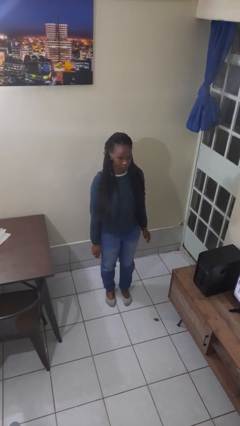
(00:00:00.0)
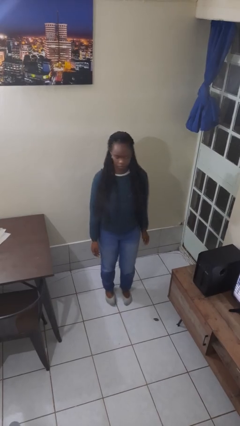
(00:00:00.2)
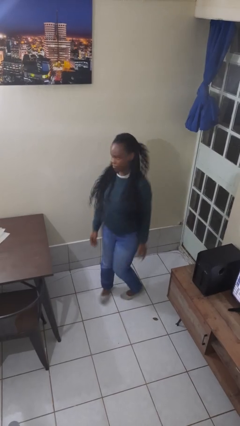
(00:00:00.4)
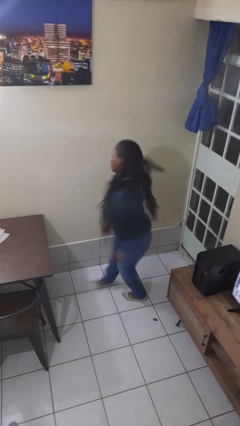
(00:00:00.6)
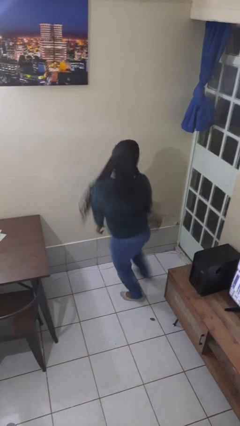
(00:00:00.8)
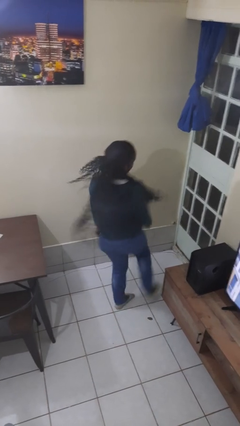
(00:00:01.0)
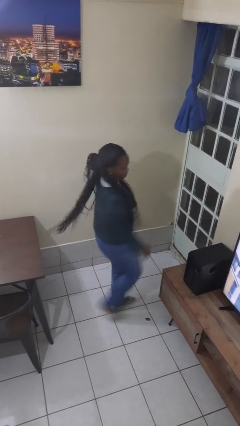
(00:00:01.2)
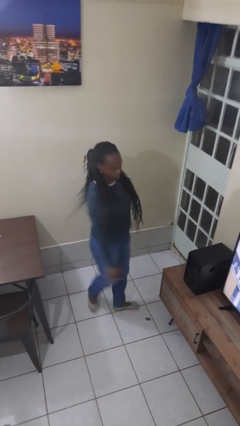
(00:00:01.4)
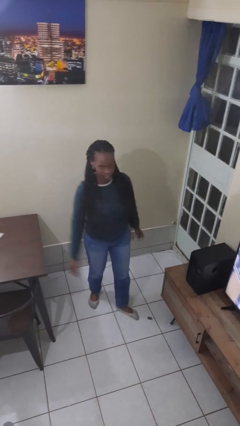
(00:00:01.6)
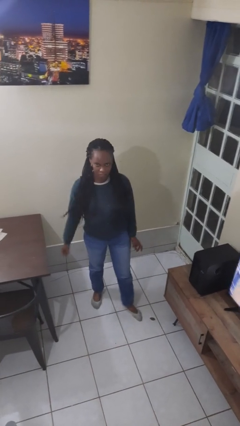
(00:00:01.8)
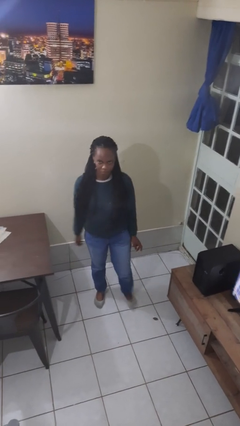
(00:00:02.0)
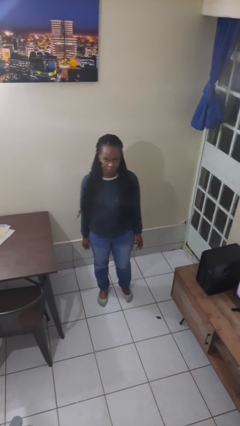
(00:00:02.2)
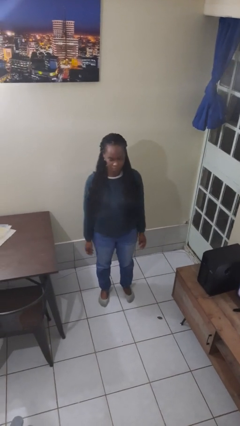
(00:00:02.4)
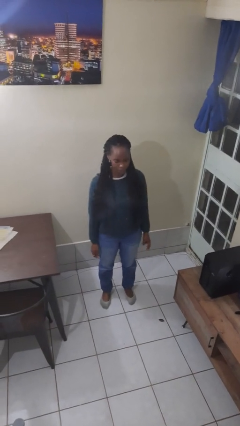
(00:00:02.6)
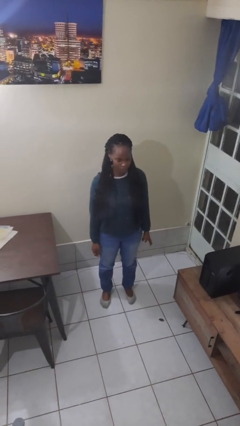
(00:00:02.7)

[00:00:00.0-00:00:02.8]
person twirls

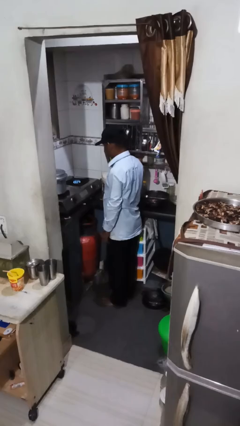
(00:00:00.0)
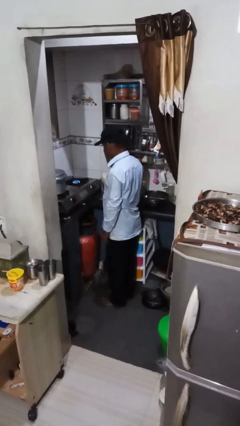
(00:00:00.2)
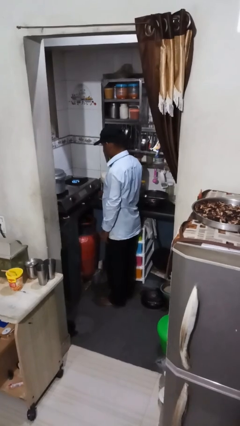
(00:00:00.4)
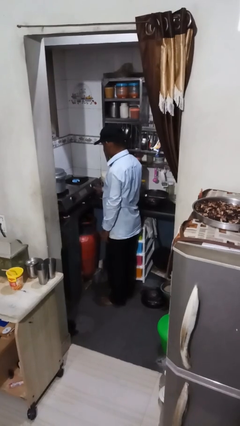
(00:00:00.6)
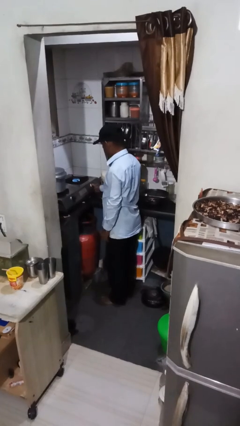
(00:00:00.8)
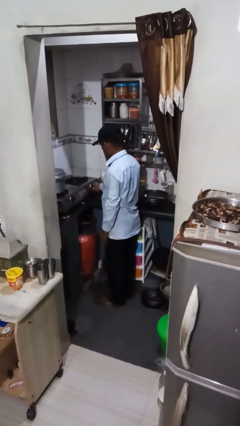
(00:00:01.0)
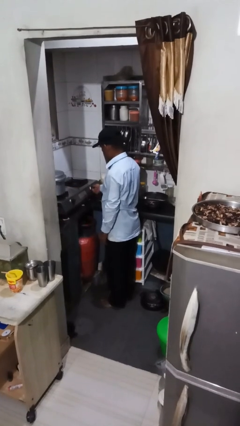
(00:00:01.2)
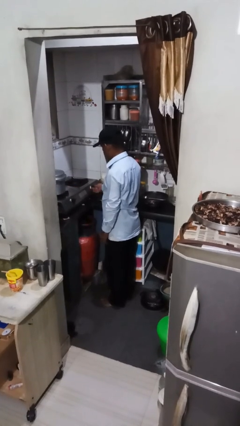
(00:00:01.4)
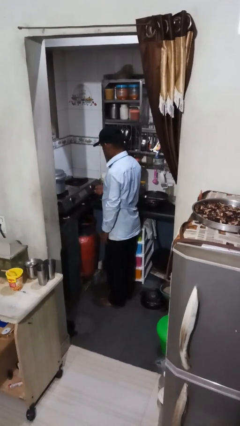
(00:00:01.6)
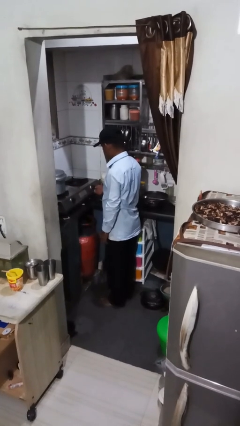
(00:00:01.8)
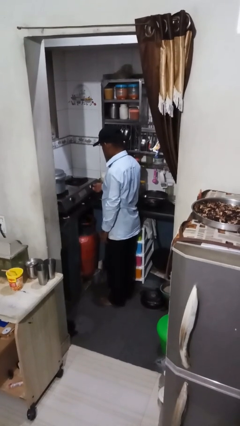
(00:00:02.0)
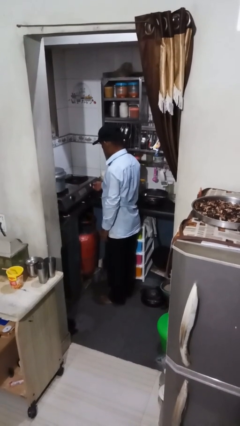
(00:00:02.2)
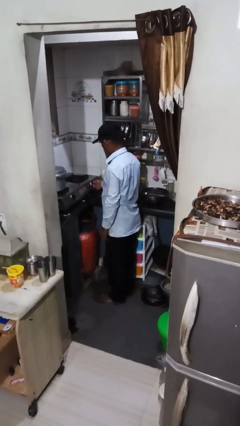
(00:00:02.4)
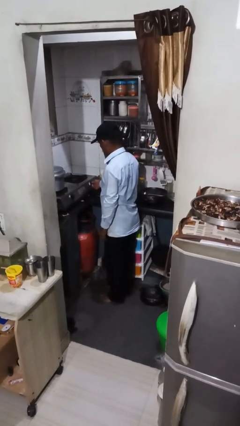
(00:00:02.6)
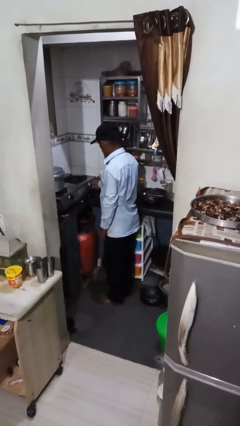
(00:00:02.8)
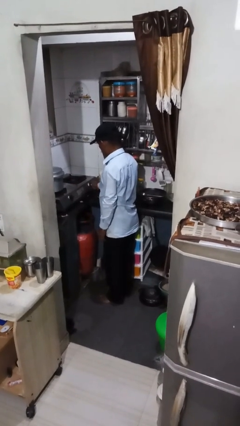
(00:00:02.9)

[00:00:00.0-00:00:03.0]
person turns off stovetop

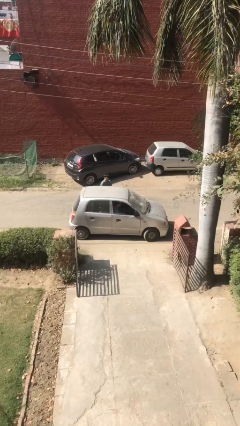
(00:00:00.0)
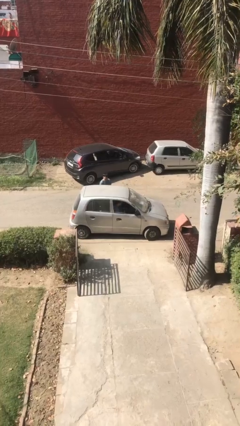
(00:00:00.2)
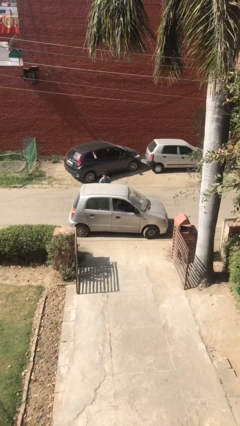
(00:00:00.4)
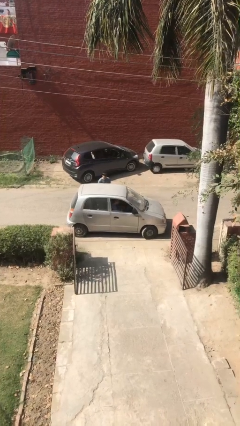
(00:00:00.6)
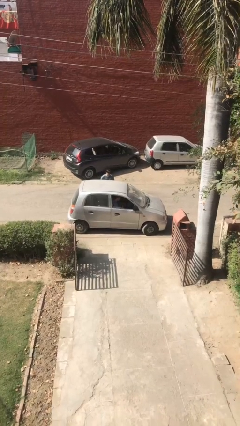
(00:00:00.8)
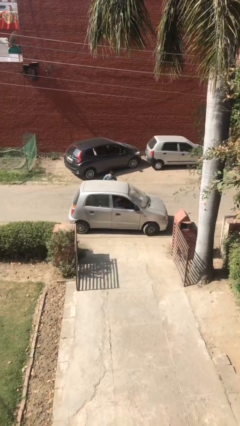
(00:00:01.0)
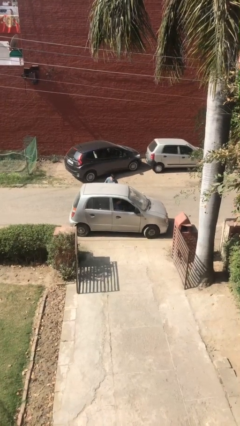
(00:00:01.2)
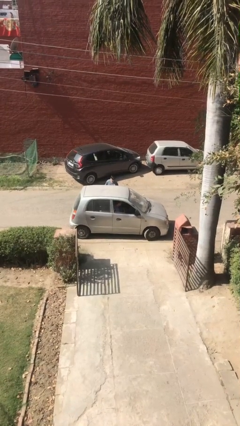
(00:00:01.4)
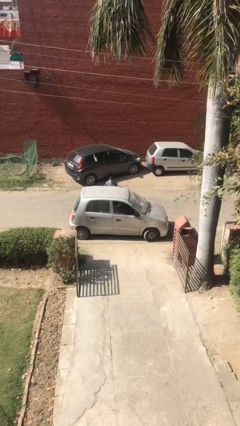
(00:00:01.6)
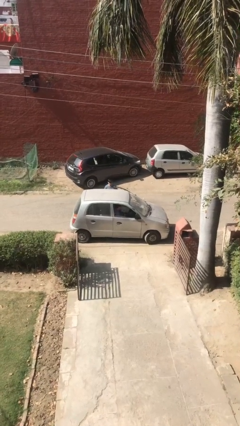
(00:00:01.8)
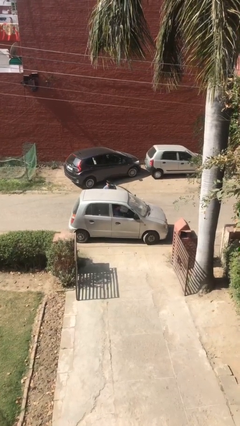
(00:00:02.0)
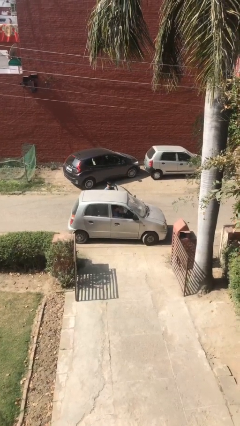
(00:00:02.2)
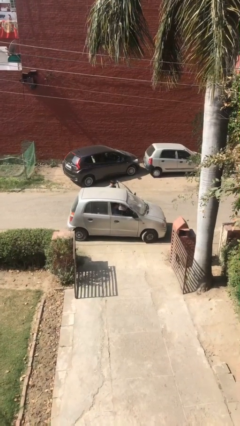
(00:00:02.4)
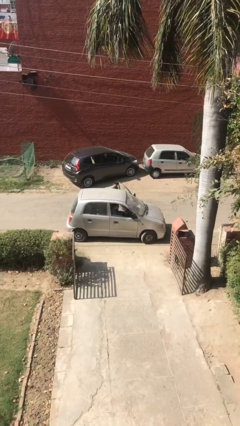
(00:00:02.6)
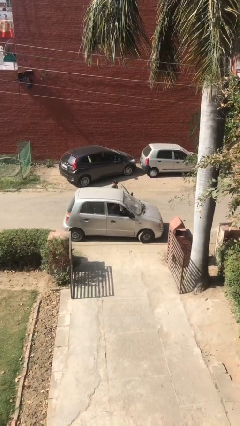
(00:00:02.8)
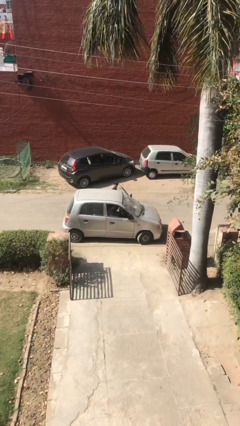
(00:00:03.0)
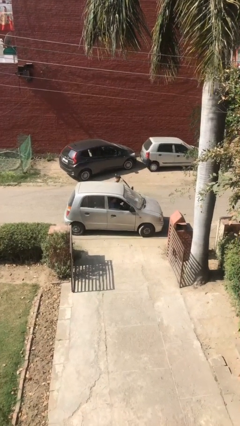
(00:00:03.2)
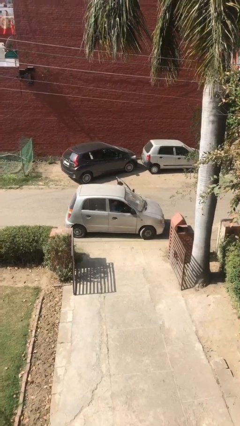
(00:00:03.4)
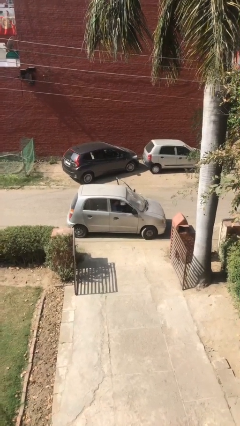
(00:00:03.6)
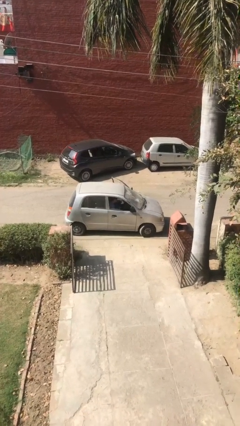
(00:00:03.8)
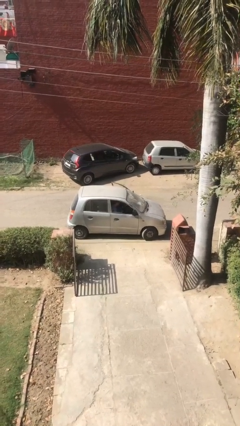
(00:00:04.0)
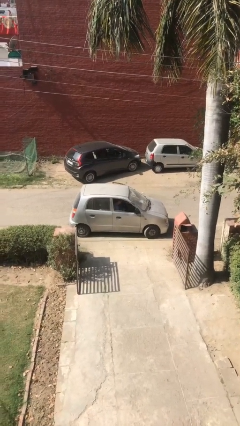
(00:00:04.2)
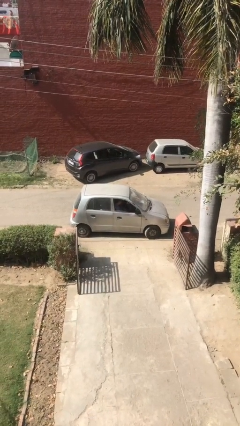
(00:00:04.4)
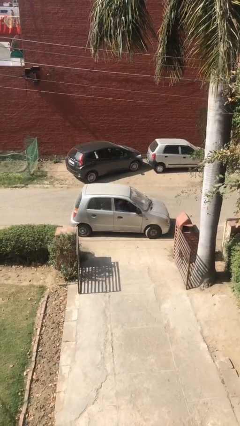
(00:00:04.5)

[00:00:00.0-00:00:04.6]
car picks up person

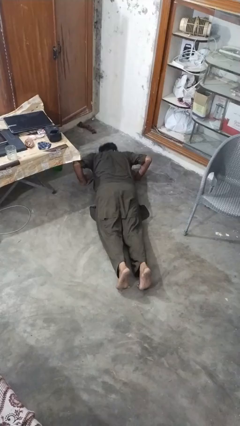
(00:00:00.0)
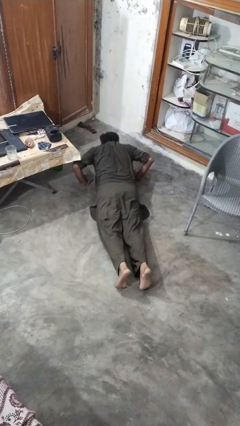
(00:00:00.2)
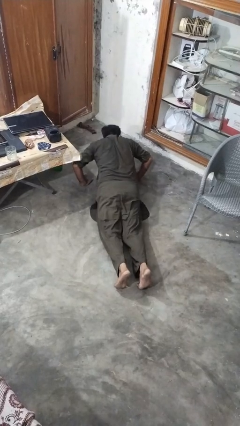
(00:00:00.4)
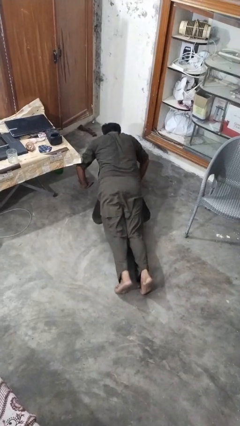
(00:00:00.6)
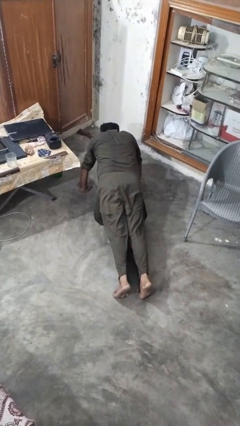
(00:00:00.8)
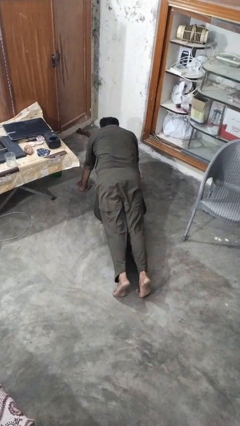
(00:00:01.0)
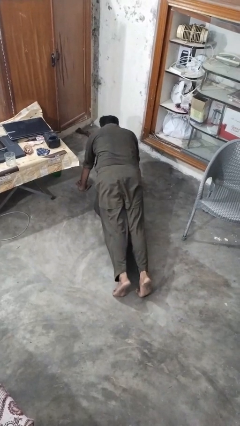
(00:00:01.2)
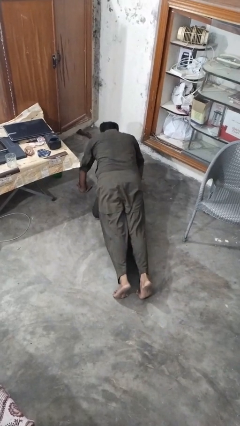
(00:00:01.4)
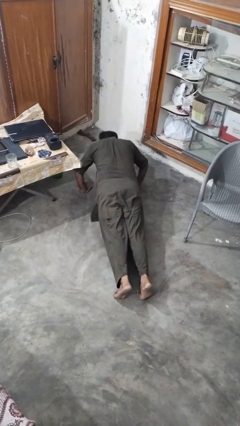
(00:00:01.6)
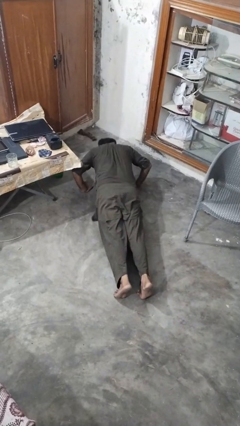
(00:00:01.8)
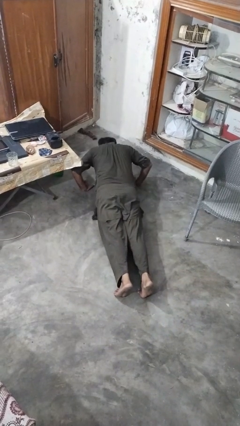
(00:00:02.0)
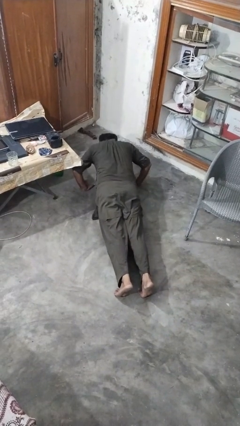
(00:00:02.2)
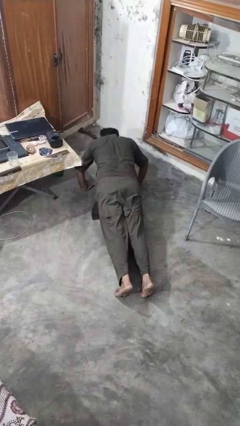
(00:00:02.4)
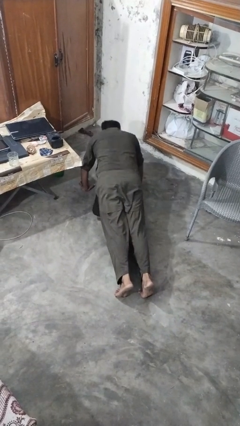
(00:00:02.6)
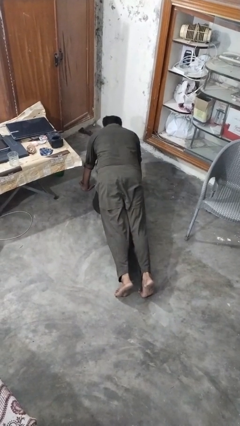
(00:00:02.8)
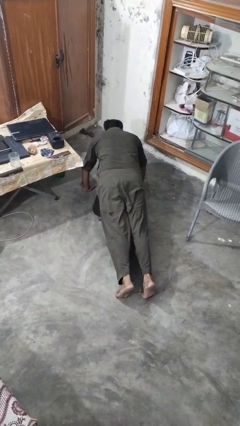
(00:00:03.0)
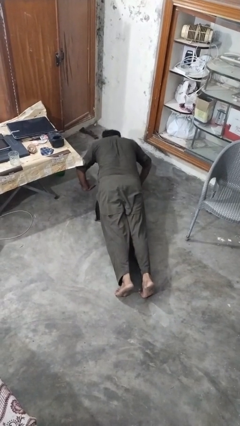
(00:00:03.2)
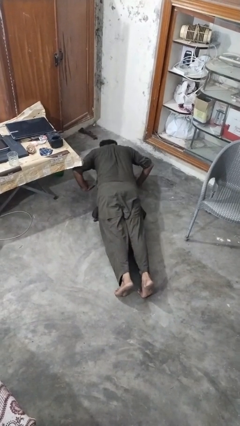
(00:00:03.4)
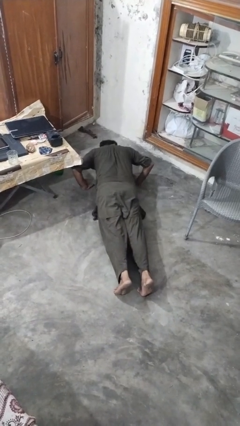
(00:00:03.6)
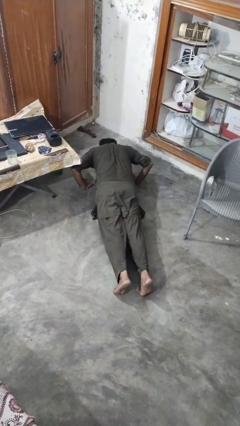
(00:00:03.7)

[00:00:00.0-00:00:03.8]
person exercises with pushup

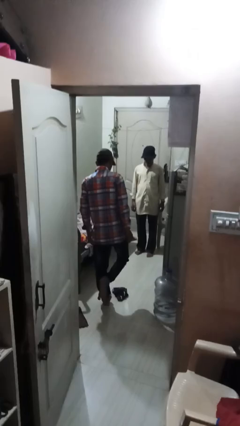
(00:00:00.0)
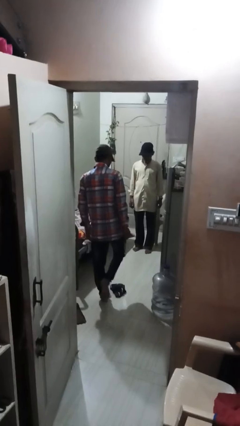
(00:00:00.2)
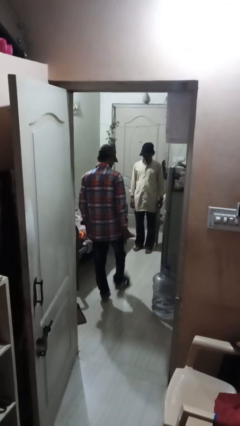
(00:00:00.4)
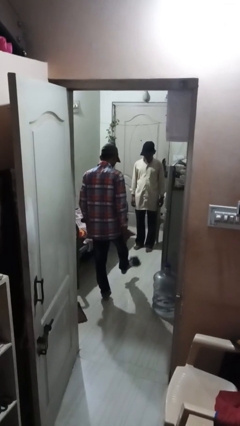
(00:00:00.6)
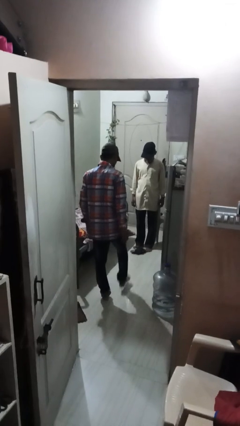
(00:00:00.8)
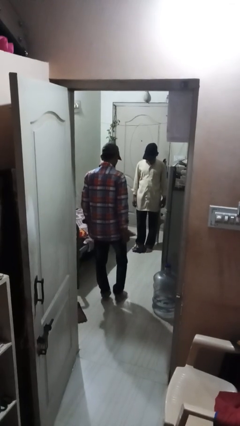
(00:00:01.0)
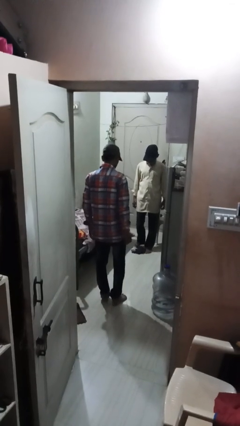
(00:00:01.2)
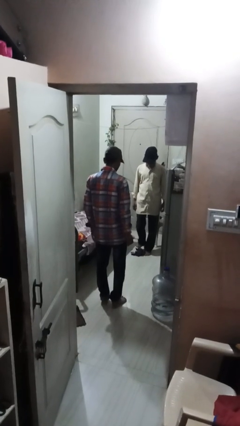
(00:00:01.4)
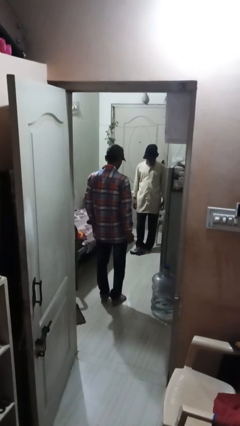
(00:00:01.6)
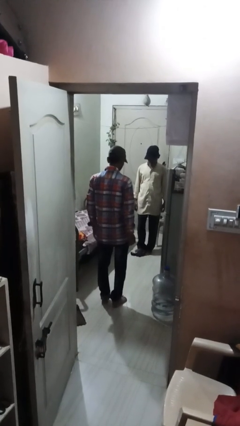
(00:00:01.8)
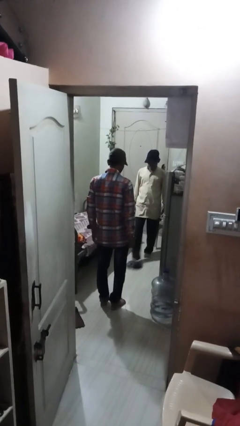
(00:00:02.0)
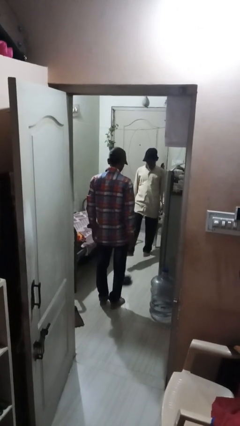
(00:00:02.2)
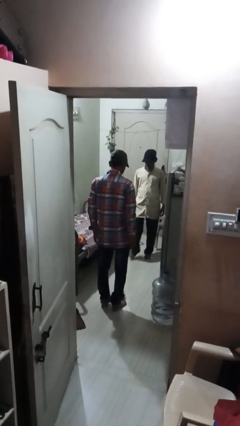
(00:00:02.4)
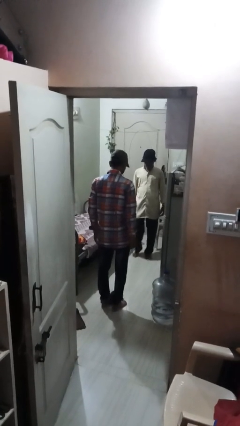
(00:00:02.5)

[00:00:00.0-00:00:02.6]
person kicks object to person

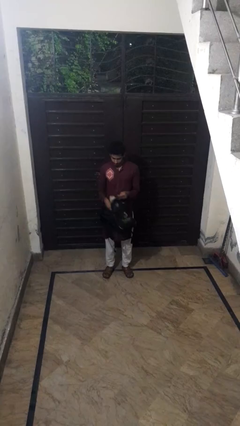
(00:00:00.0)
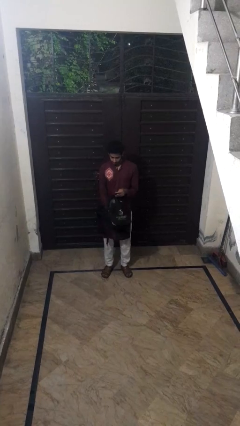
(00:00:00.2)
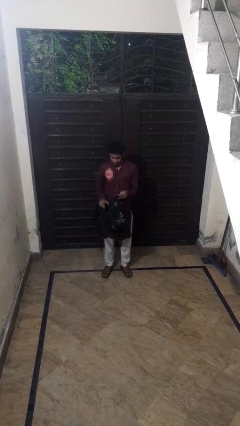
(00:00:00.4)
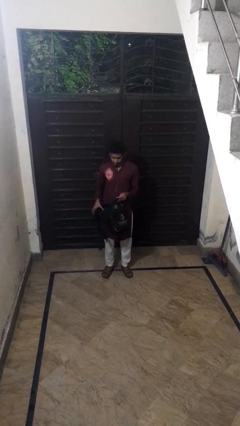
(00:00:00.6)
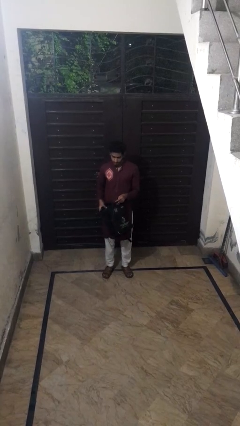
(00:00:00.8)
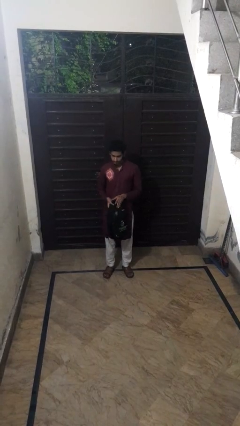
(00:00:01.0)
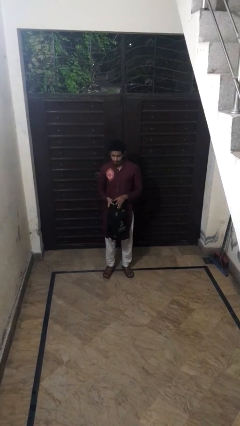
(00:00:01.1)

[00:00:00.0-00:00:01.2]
person puts object into backpack
